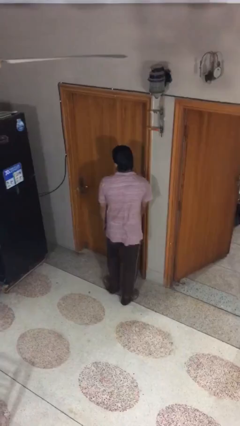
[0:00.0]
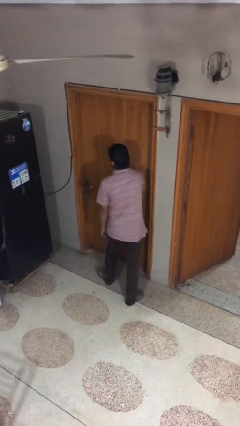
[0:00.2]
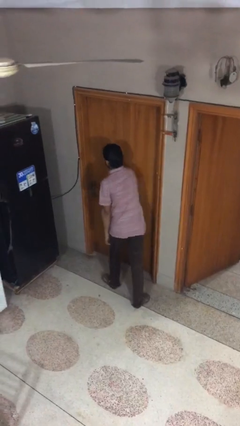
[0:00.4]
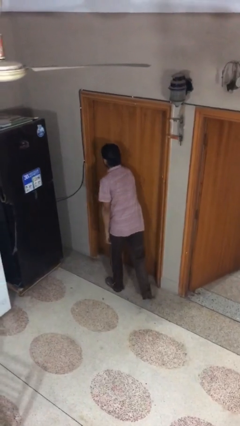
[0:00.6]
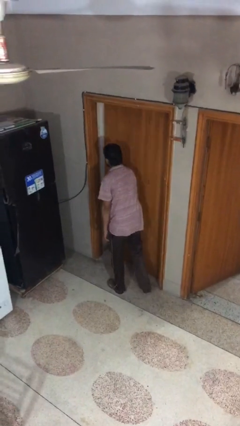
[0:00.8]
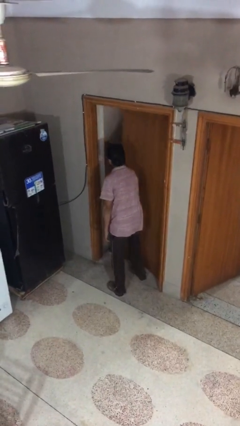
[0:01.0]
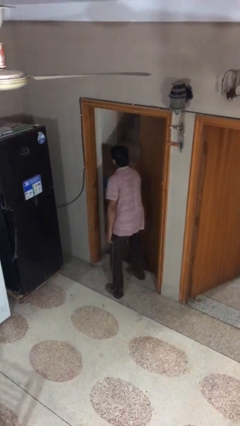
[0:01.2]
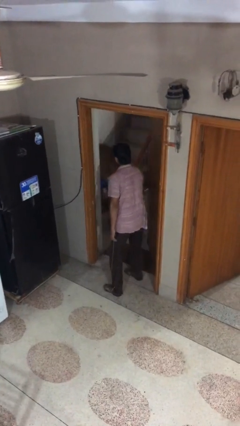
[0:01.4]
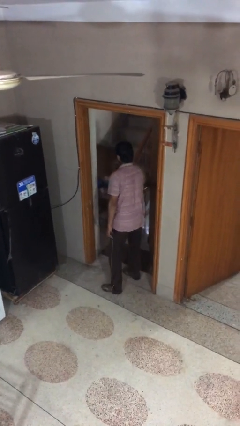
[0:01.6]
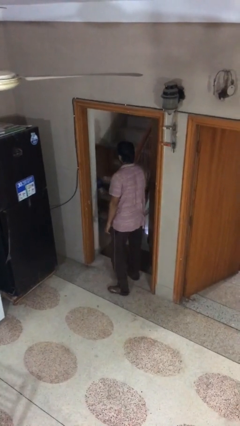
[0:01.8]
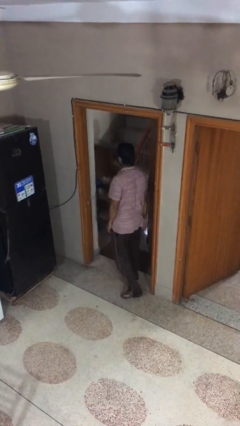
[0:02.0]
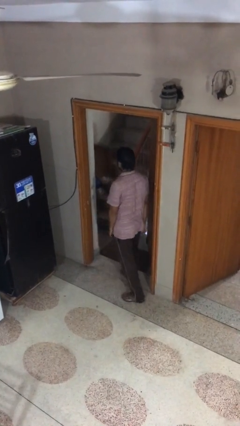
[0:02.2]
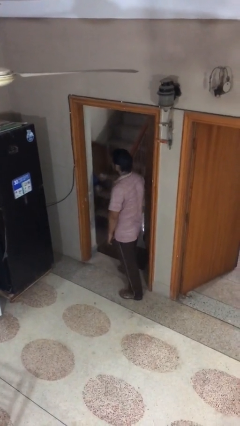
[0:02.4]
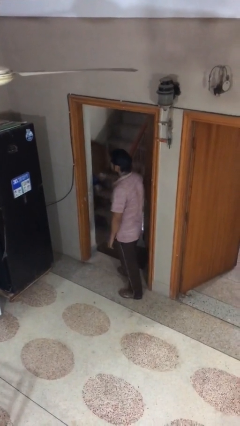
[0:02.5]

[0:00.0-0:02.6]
person opens facility door

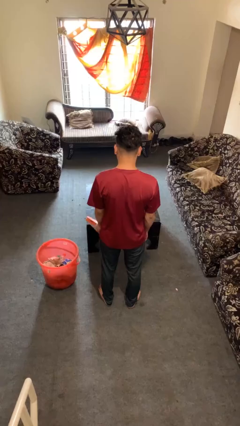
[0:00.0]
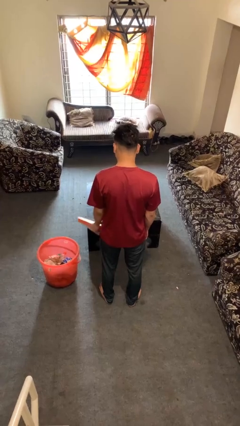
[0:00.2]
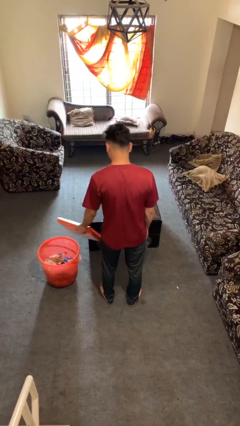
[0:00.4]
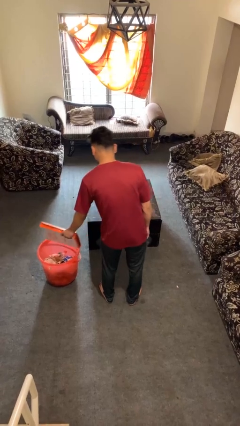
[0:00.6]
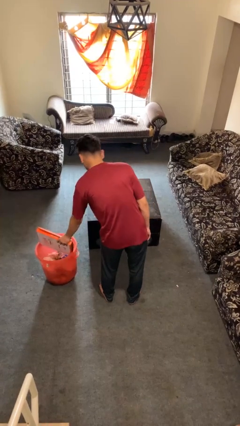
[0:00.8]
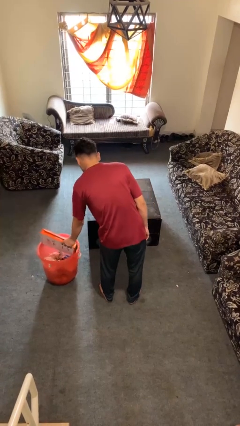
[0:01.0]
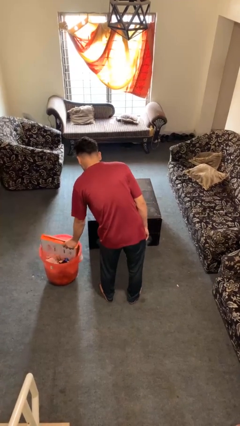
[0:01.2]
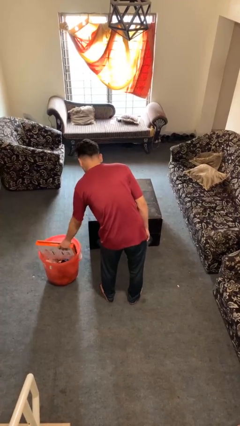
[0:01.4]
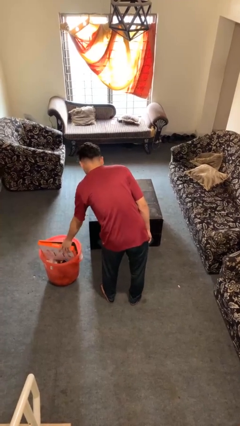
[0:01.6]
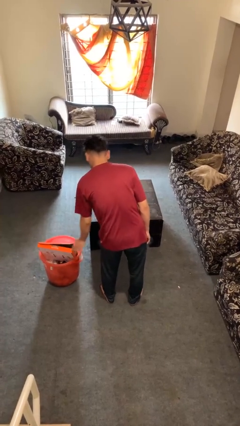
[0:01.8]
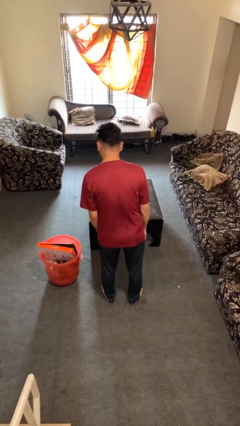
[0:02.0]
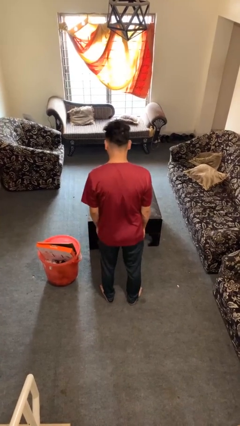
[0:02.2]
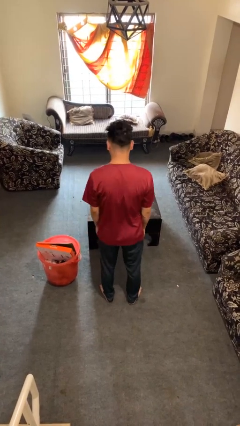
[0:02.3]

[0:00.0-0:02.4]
person puts object into basket

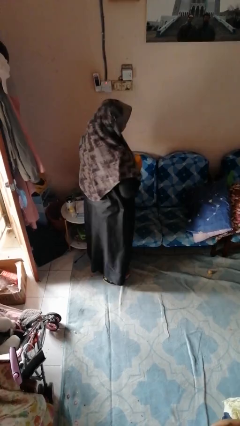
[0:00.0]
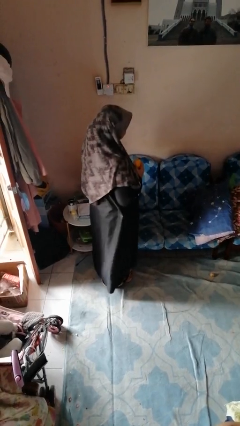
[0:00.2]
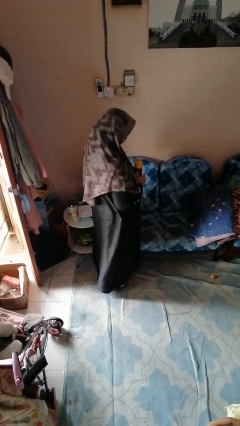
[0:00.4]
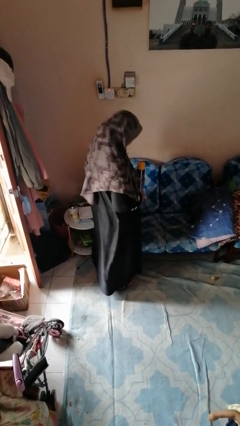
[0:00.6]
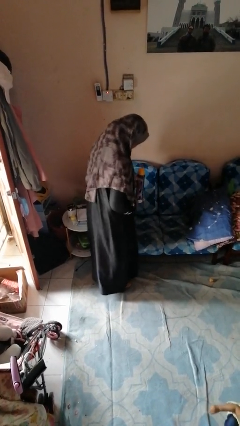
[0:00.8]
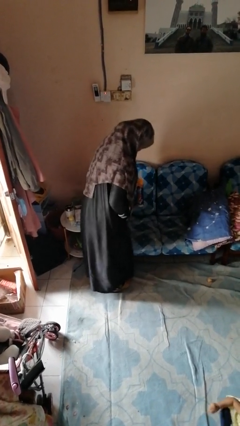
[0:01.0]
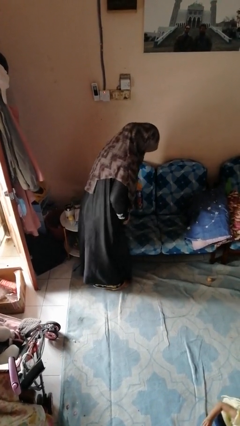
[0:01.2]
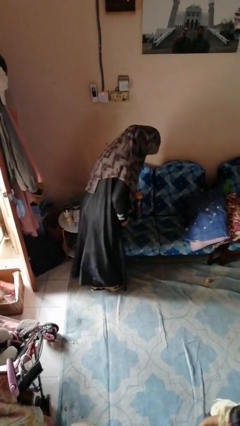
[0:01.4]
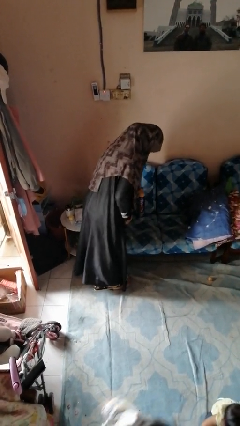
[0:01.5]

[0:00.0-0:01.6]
person puts down object on couch

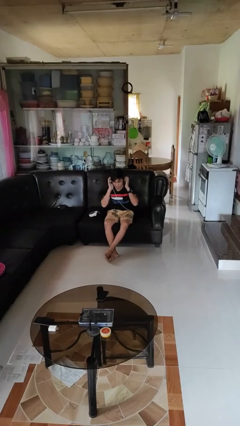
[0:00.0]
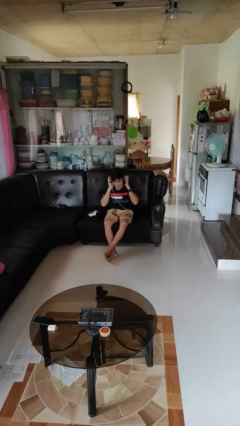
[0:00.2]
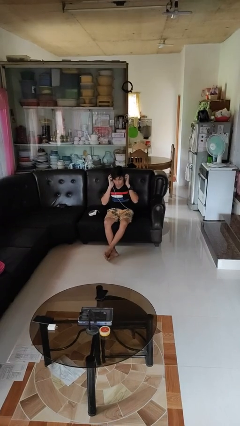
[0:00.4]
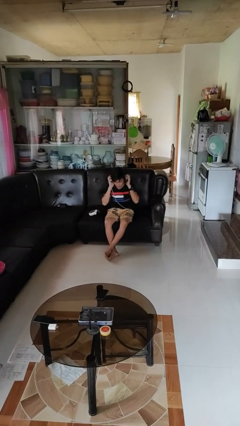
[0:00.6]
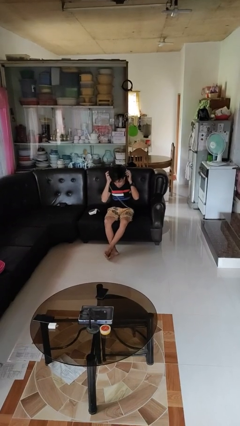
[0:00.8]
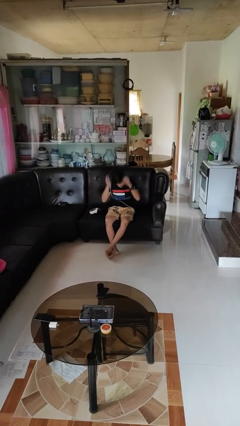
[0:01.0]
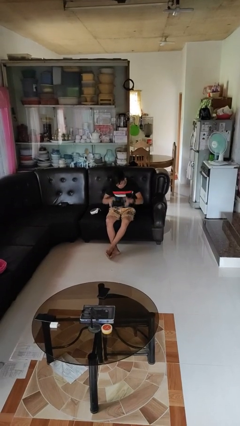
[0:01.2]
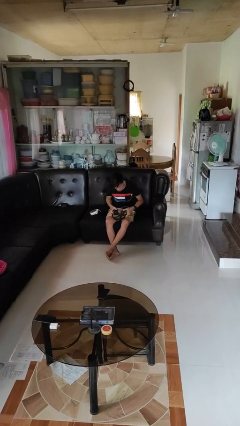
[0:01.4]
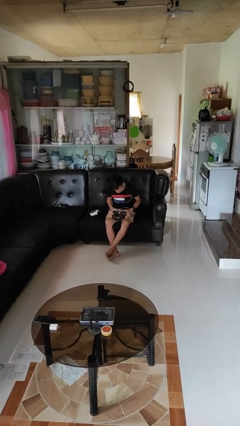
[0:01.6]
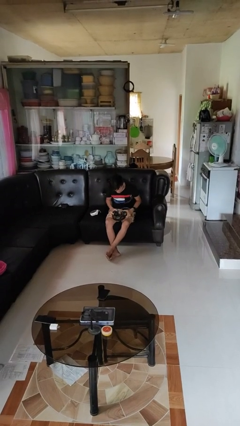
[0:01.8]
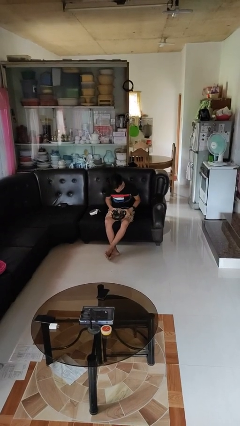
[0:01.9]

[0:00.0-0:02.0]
person takes off headphones

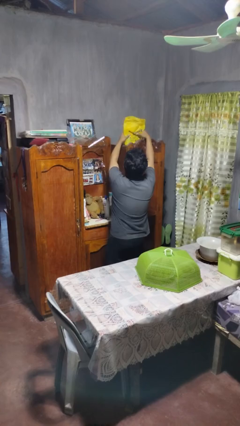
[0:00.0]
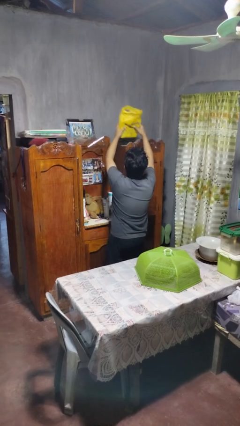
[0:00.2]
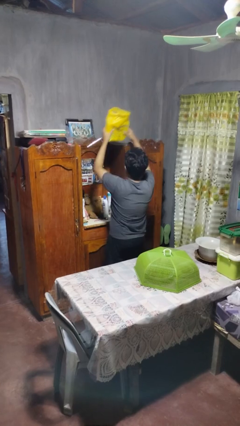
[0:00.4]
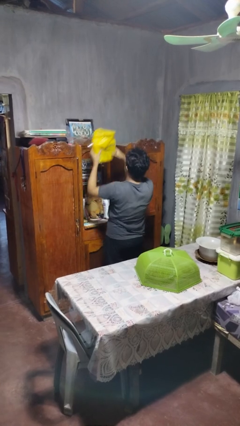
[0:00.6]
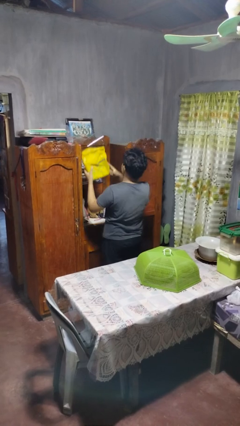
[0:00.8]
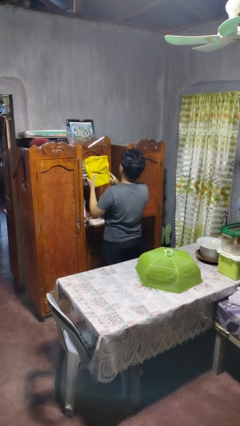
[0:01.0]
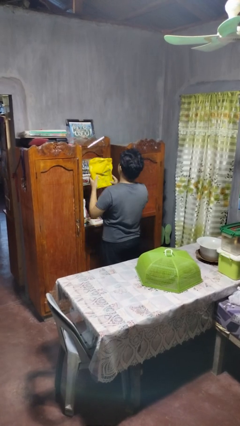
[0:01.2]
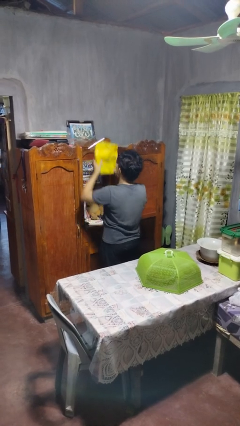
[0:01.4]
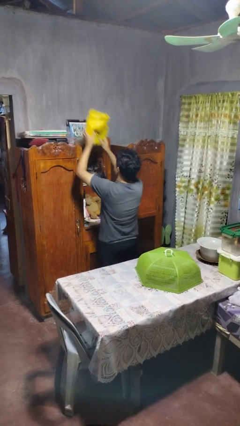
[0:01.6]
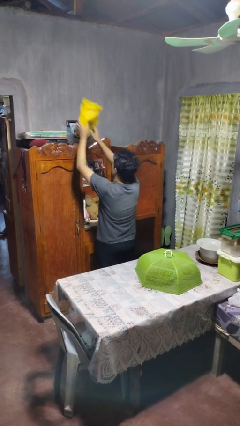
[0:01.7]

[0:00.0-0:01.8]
person picks up object from shelf

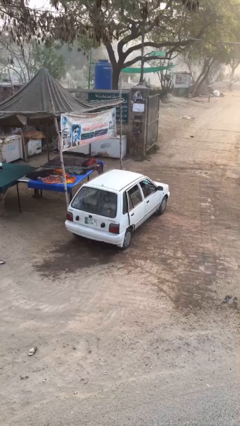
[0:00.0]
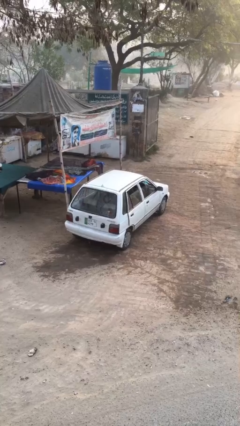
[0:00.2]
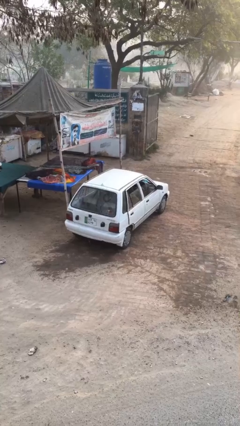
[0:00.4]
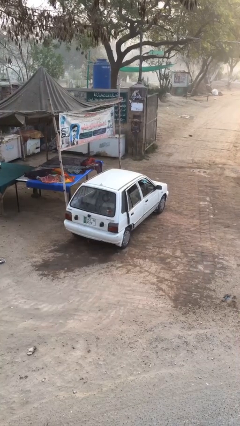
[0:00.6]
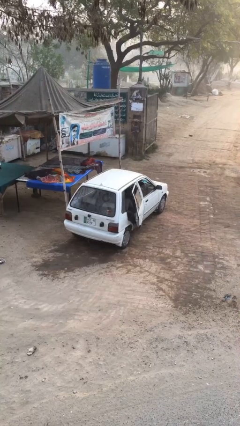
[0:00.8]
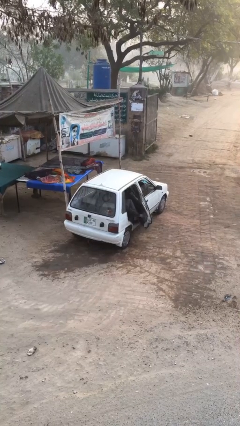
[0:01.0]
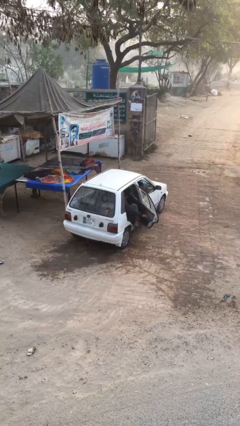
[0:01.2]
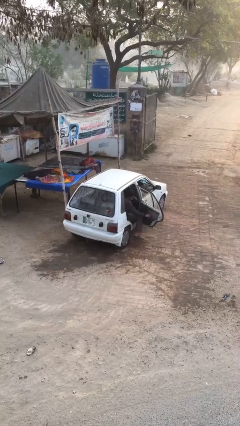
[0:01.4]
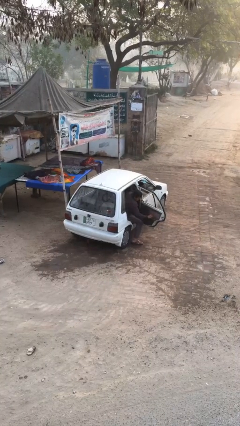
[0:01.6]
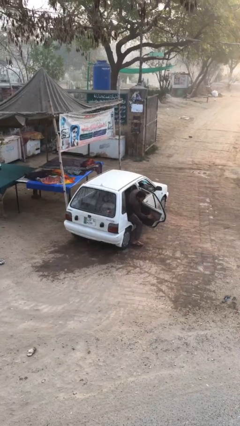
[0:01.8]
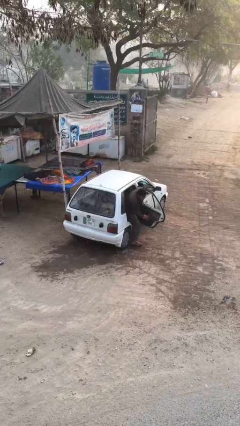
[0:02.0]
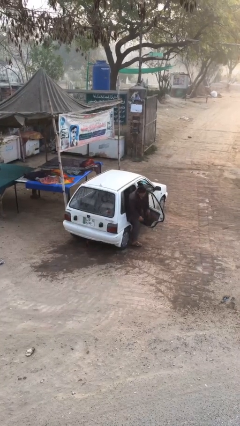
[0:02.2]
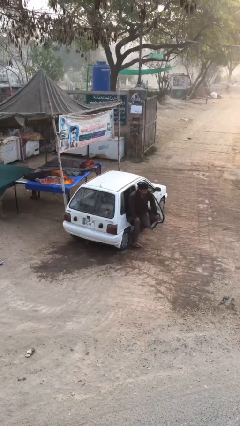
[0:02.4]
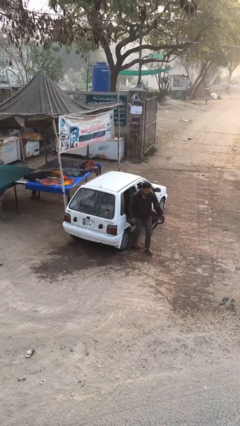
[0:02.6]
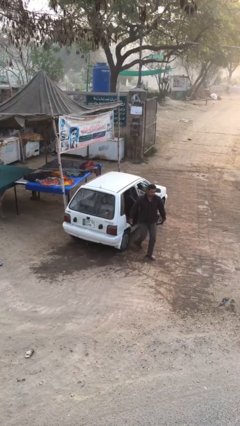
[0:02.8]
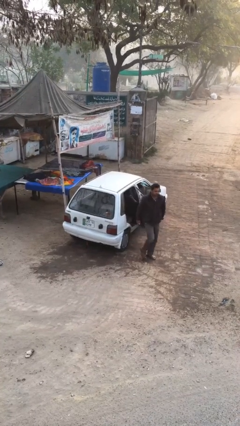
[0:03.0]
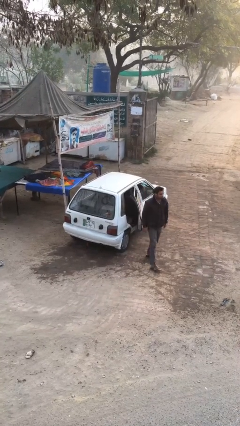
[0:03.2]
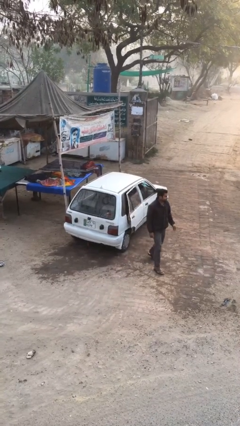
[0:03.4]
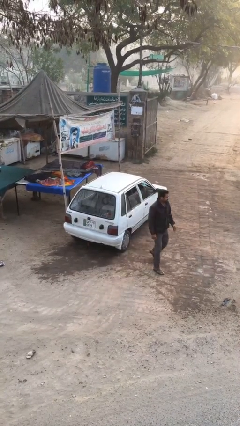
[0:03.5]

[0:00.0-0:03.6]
car drops off person

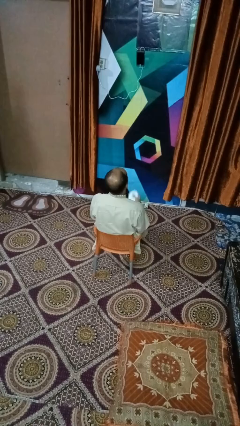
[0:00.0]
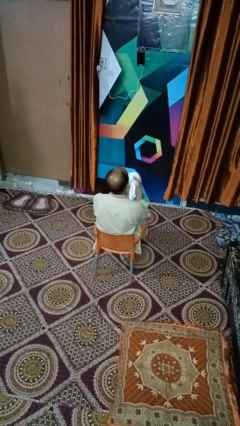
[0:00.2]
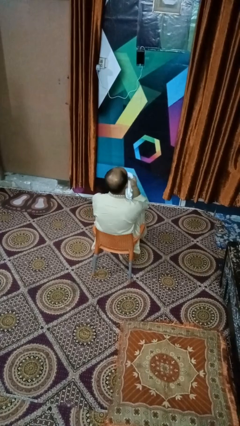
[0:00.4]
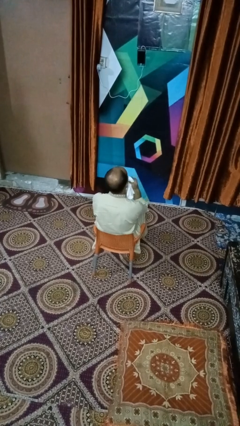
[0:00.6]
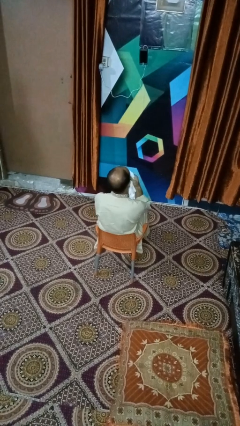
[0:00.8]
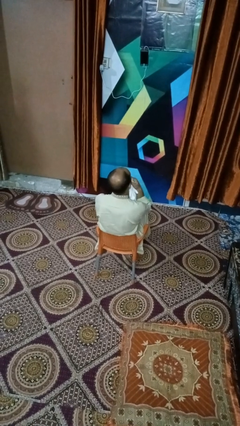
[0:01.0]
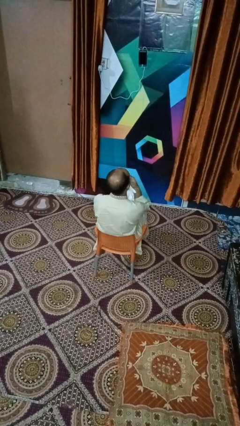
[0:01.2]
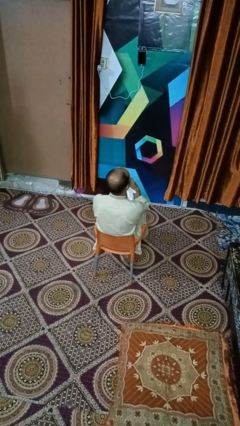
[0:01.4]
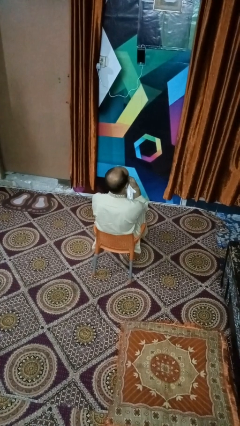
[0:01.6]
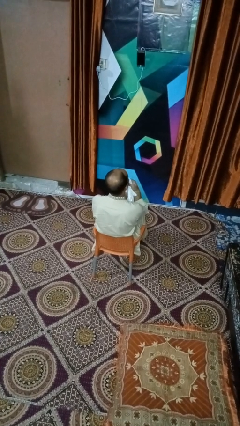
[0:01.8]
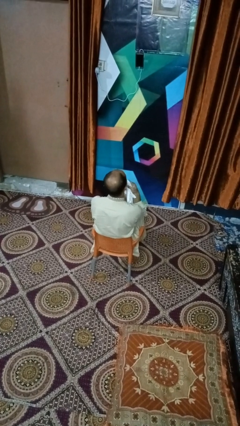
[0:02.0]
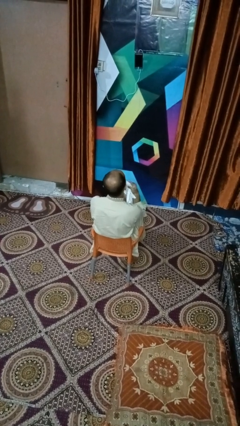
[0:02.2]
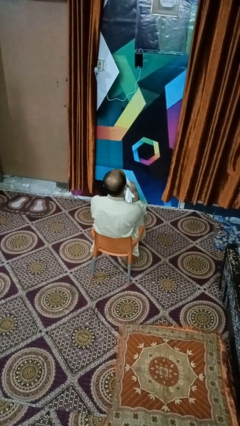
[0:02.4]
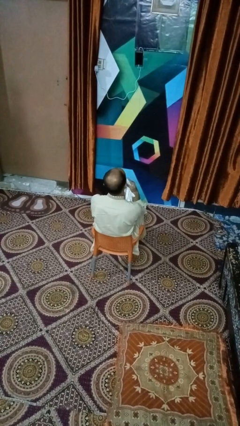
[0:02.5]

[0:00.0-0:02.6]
person wipes mouth with napkin

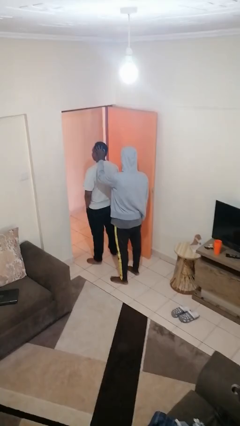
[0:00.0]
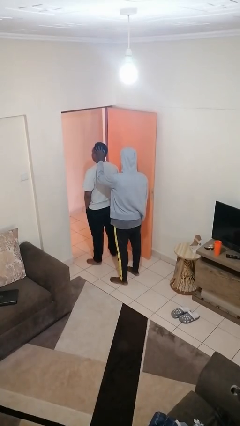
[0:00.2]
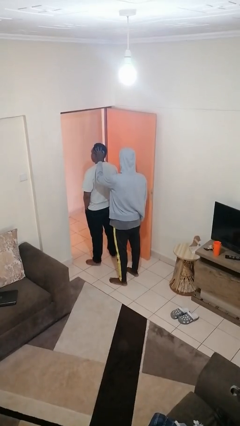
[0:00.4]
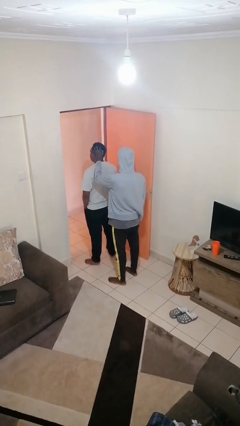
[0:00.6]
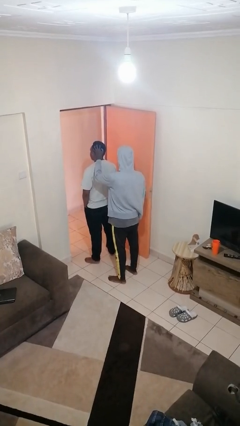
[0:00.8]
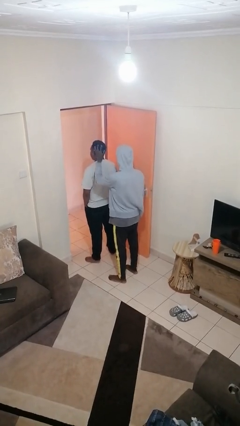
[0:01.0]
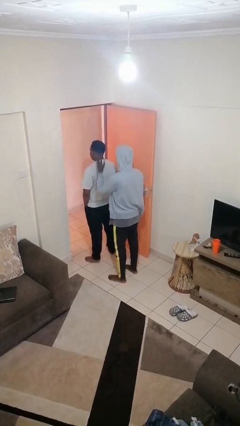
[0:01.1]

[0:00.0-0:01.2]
person grabs person by hair
